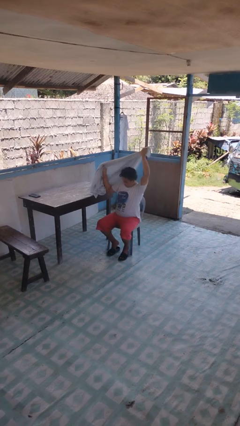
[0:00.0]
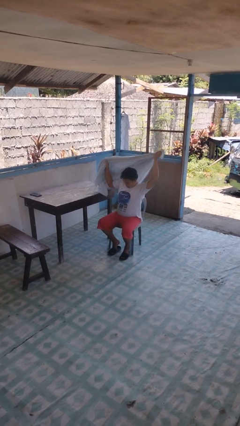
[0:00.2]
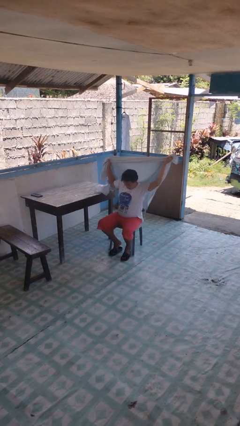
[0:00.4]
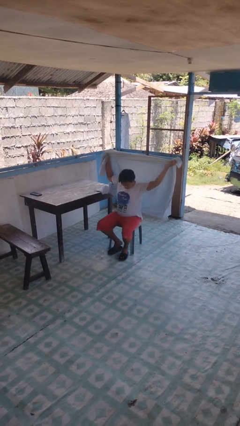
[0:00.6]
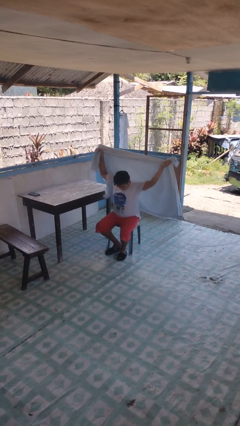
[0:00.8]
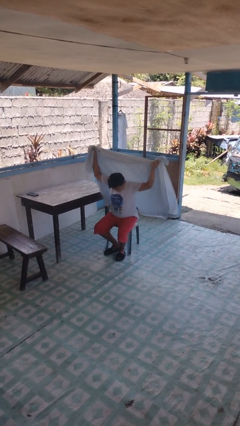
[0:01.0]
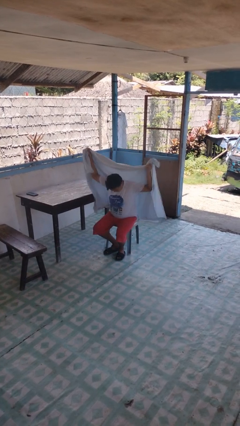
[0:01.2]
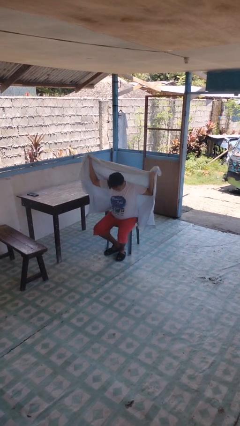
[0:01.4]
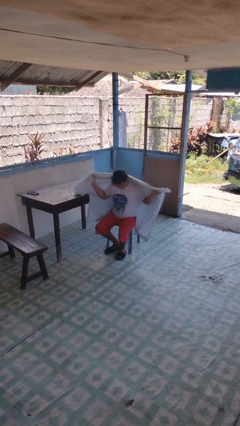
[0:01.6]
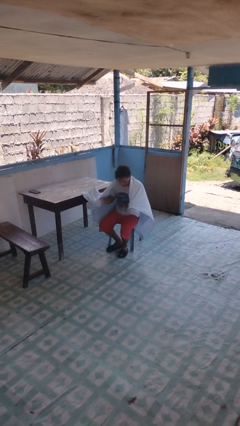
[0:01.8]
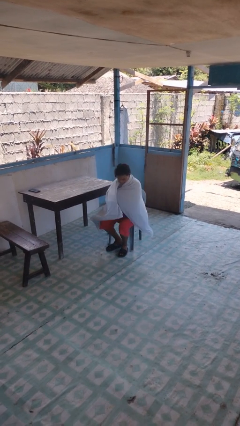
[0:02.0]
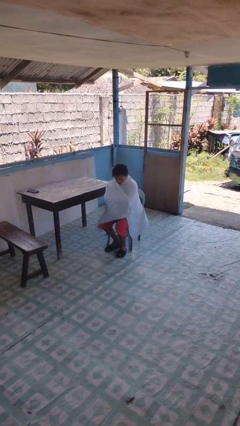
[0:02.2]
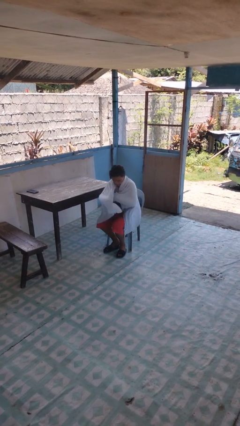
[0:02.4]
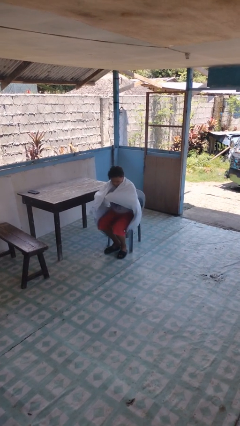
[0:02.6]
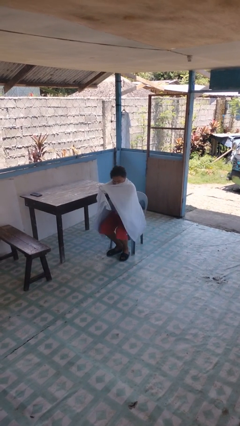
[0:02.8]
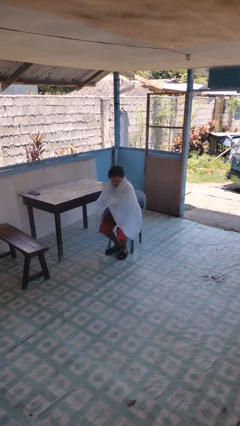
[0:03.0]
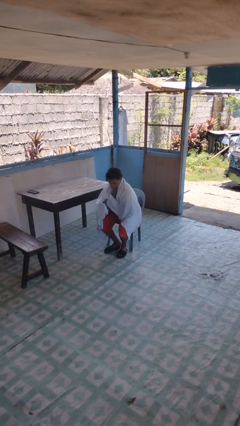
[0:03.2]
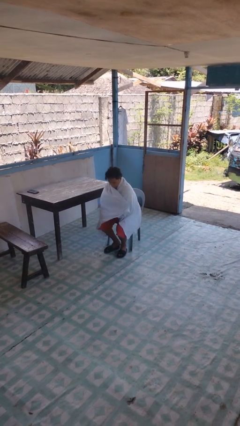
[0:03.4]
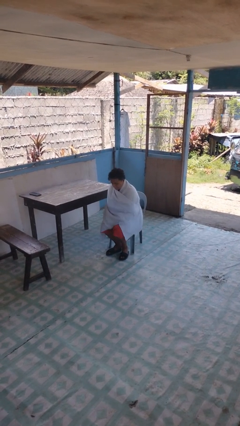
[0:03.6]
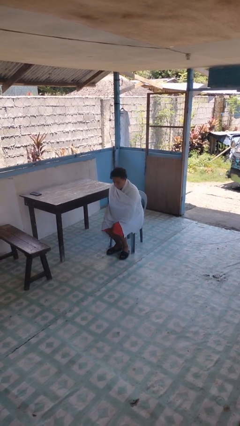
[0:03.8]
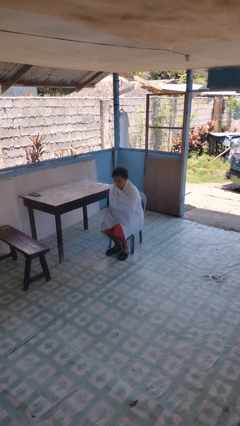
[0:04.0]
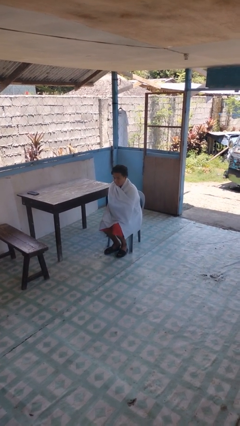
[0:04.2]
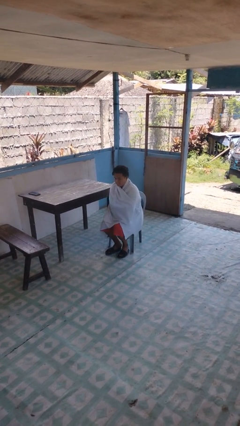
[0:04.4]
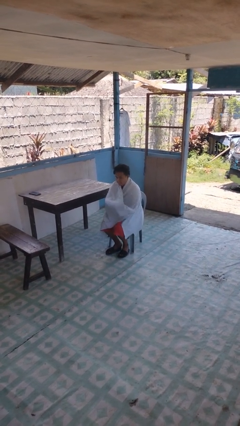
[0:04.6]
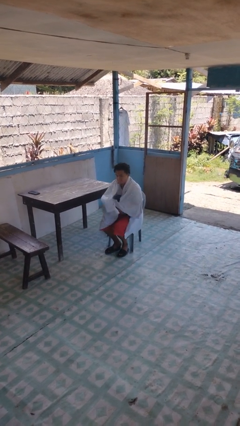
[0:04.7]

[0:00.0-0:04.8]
person covers with blanket

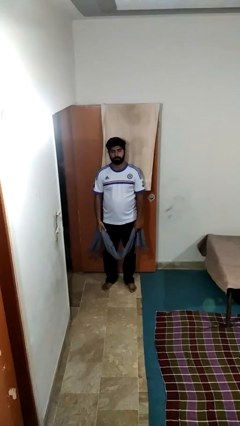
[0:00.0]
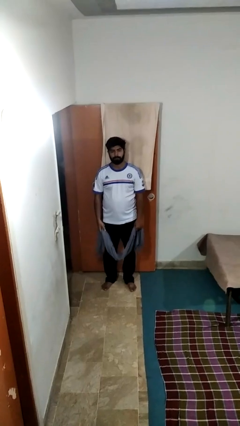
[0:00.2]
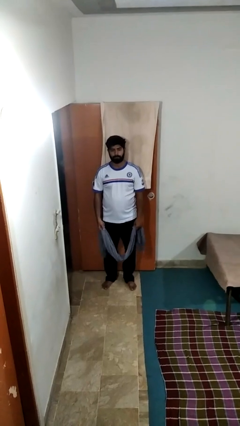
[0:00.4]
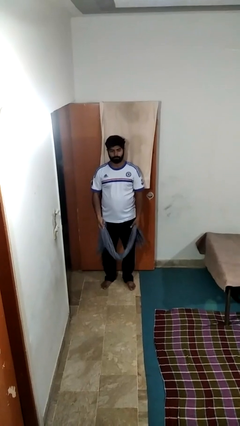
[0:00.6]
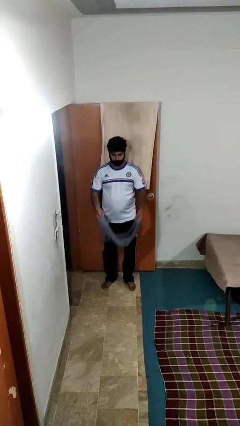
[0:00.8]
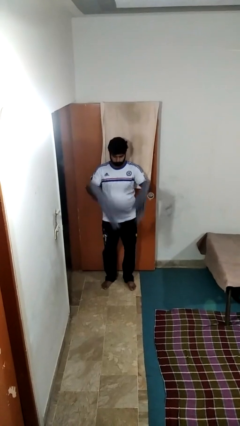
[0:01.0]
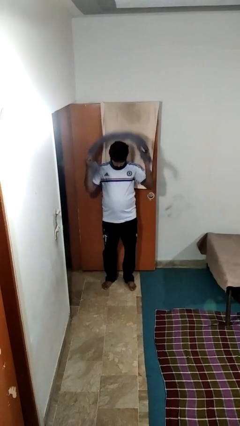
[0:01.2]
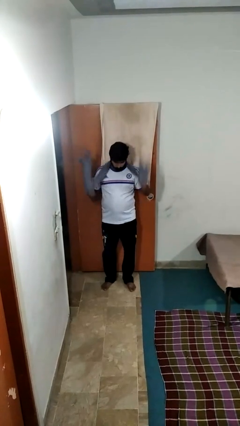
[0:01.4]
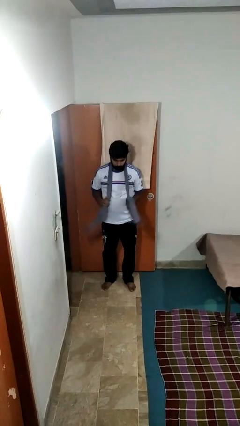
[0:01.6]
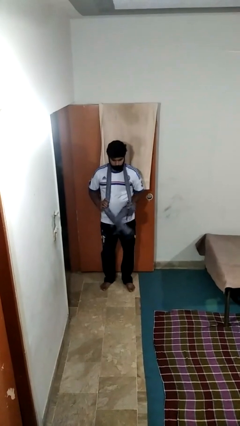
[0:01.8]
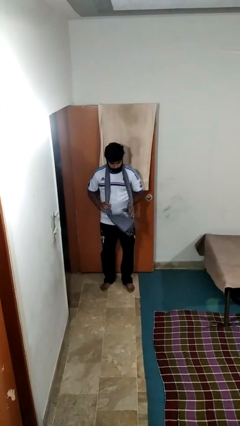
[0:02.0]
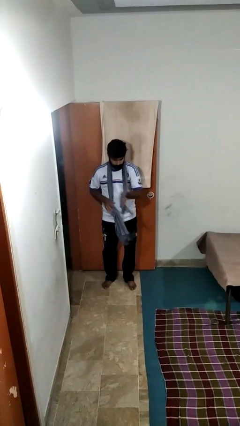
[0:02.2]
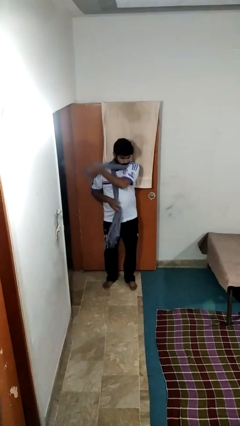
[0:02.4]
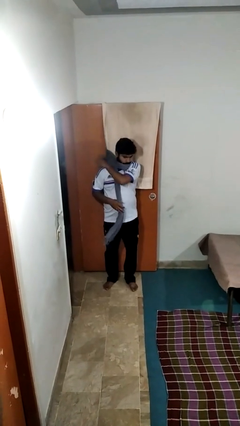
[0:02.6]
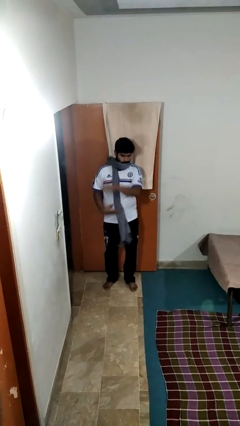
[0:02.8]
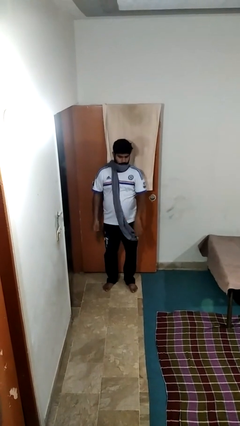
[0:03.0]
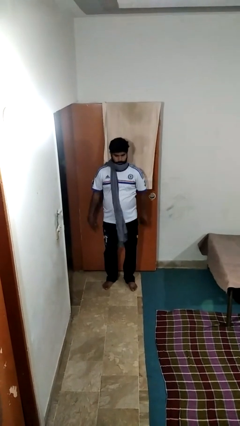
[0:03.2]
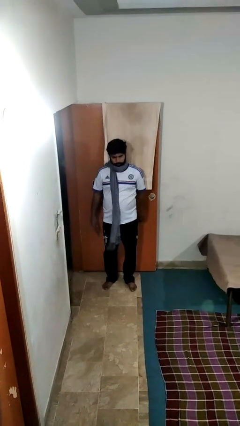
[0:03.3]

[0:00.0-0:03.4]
person puts on scarf

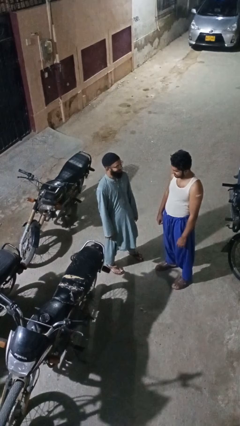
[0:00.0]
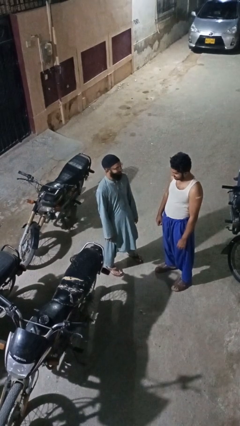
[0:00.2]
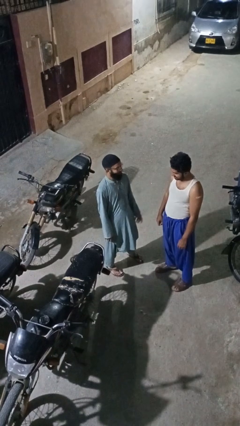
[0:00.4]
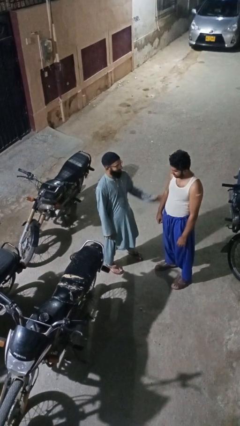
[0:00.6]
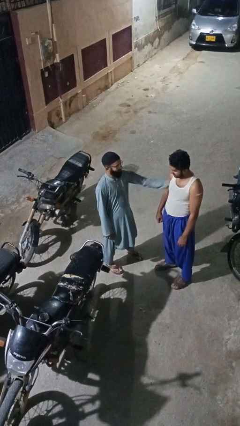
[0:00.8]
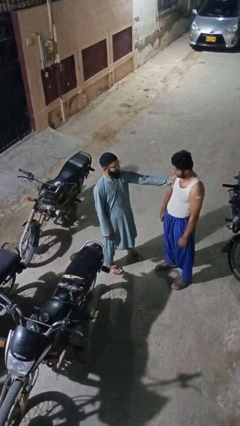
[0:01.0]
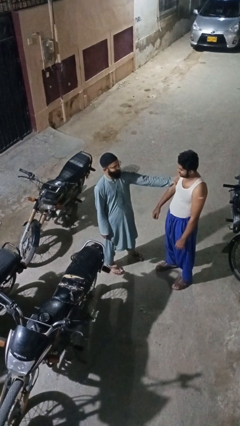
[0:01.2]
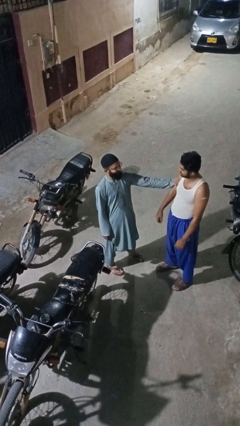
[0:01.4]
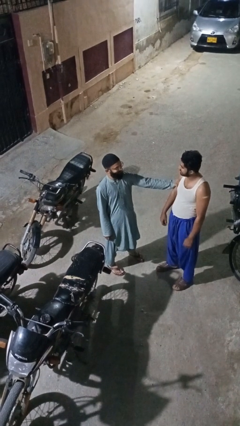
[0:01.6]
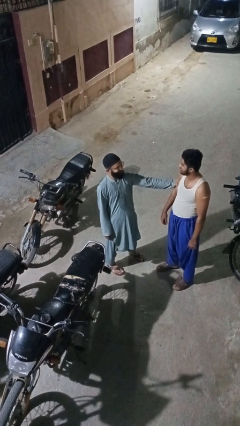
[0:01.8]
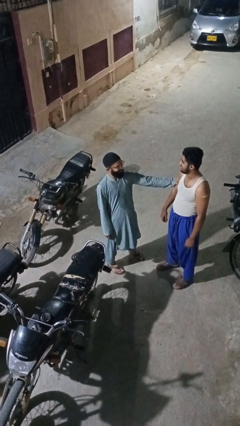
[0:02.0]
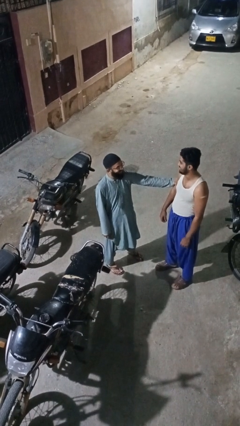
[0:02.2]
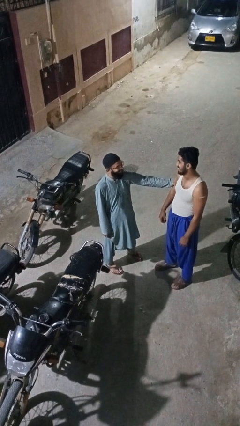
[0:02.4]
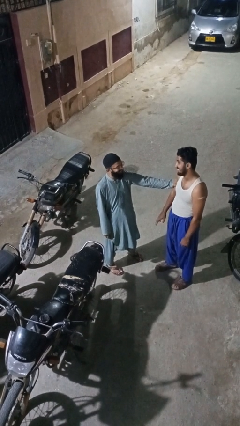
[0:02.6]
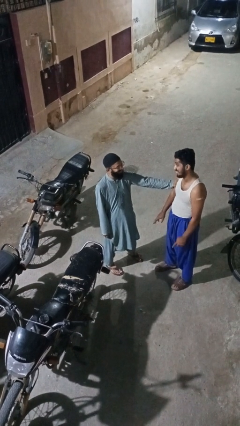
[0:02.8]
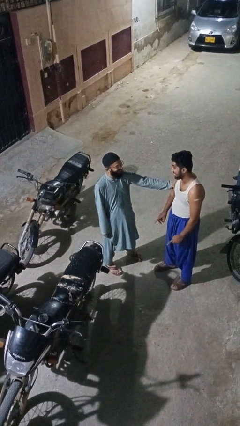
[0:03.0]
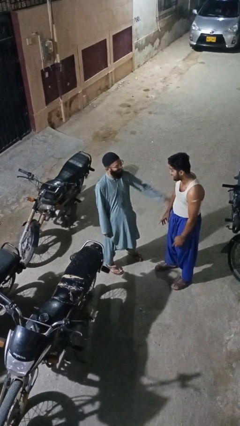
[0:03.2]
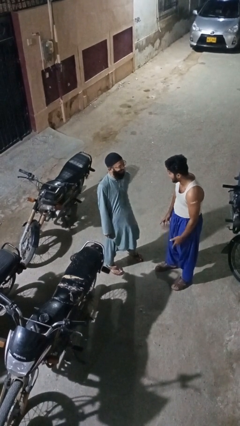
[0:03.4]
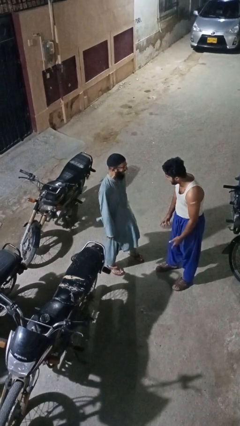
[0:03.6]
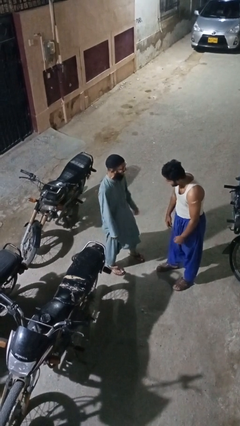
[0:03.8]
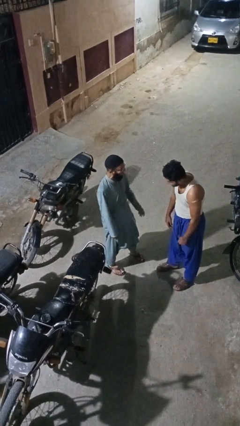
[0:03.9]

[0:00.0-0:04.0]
person grabs person by bicep

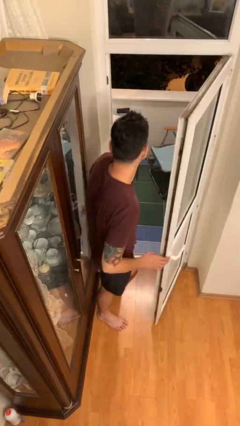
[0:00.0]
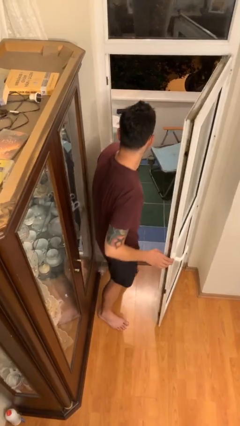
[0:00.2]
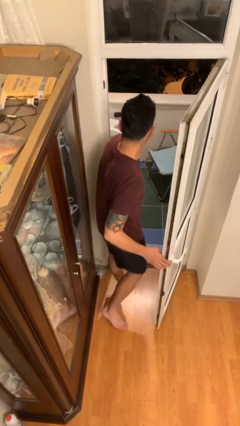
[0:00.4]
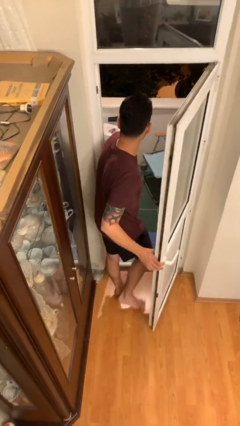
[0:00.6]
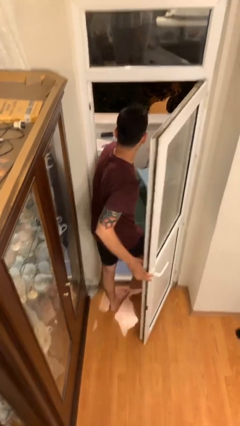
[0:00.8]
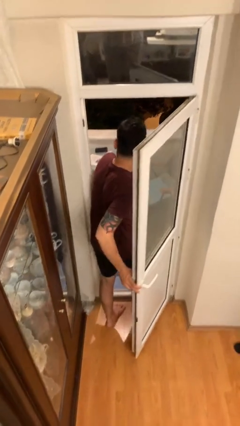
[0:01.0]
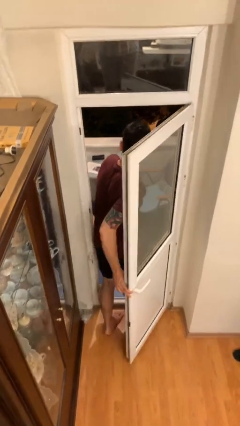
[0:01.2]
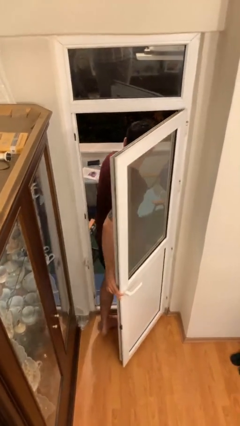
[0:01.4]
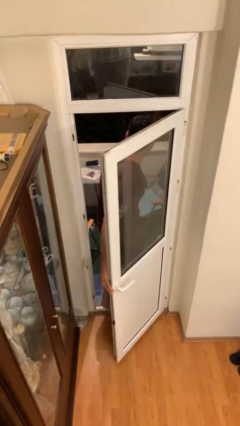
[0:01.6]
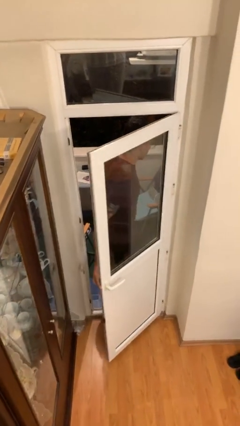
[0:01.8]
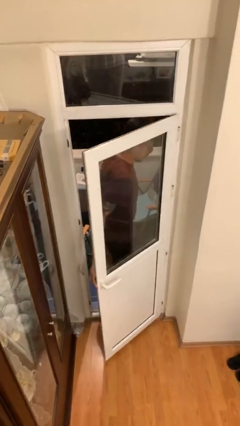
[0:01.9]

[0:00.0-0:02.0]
person exits scene through structure

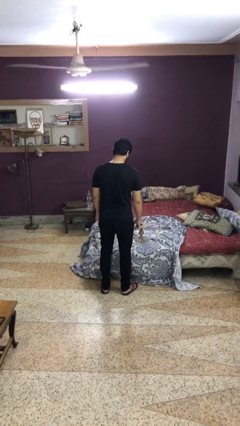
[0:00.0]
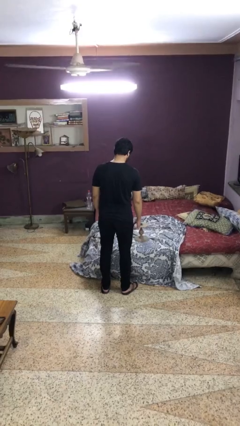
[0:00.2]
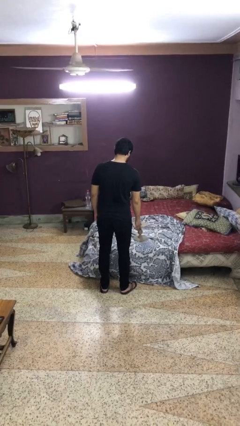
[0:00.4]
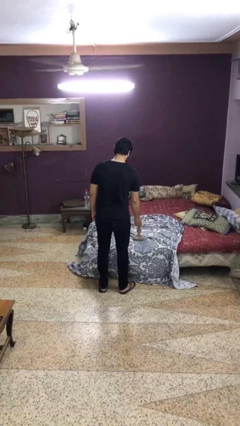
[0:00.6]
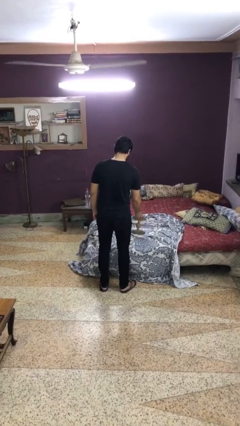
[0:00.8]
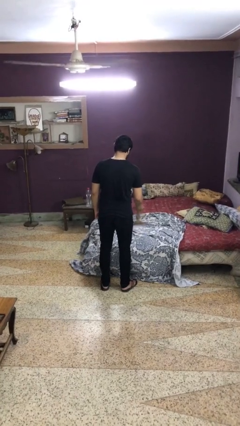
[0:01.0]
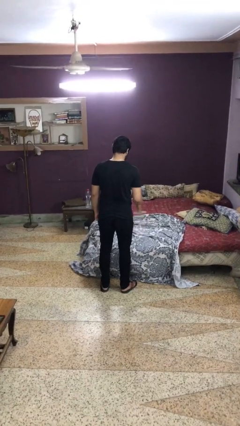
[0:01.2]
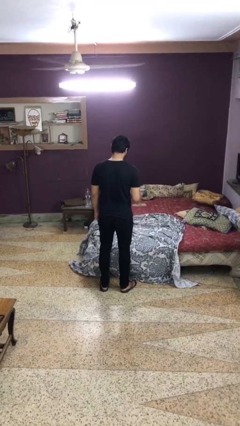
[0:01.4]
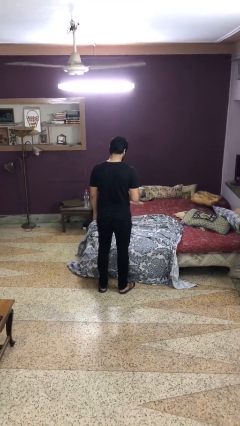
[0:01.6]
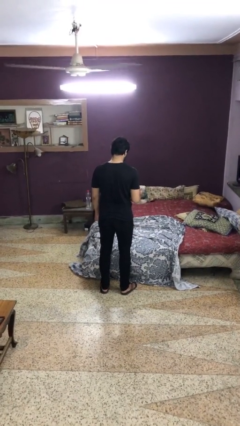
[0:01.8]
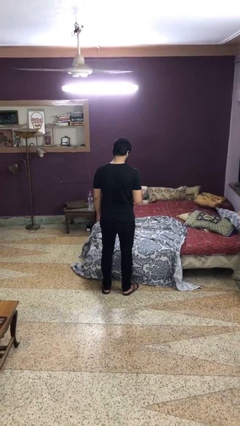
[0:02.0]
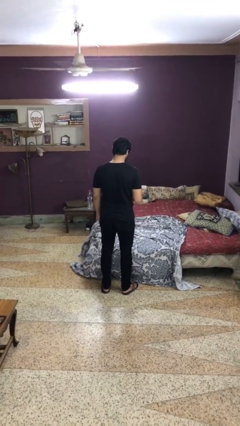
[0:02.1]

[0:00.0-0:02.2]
person picks up object from bed

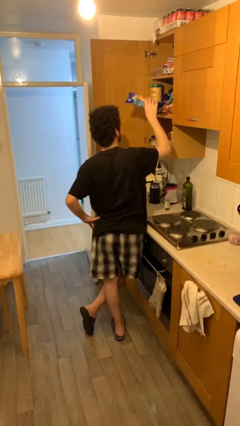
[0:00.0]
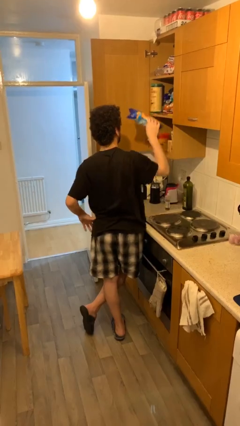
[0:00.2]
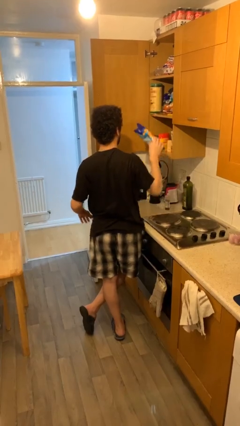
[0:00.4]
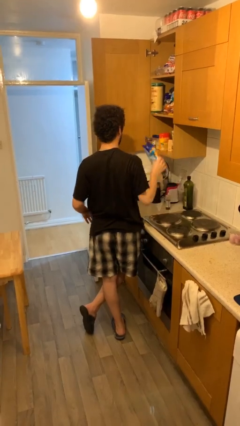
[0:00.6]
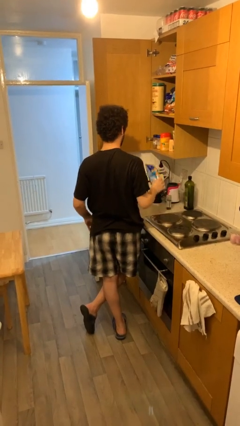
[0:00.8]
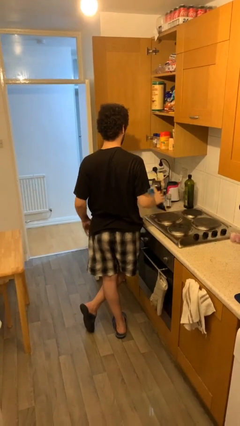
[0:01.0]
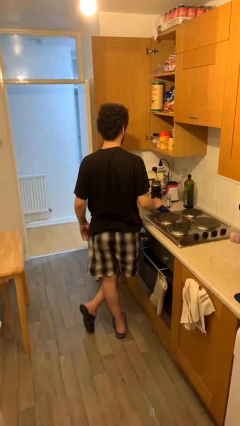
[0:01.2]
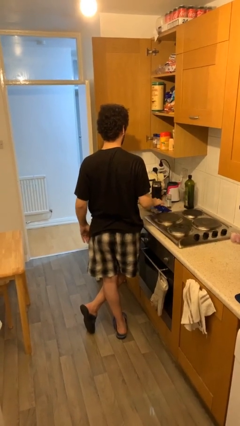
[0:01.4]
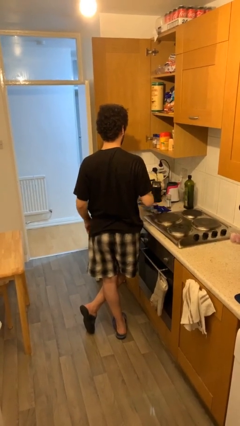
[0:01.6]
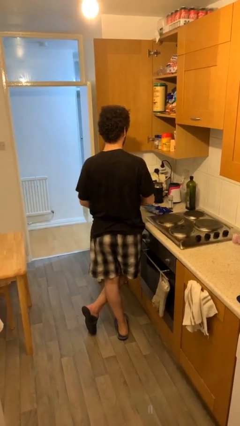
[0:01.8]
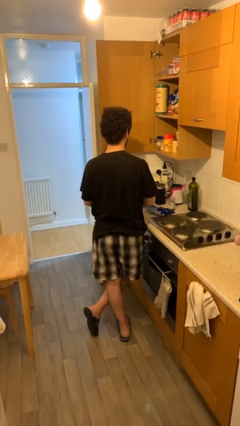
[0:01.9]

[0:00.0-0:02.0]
person puts down object on table
